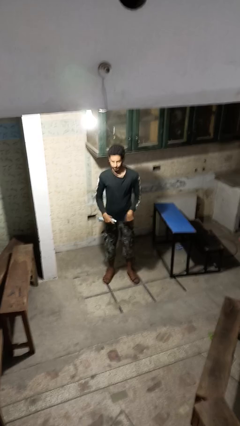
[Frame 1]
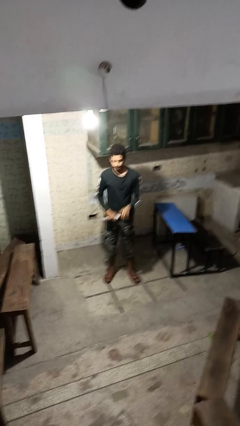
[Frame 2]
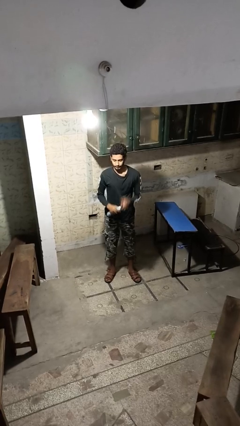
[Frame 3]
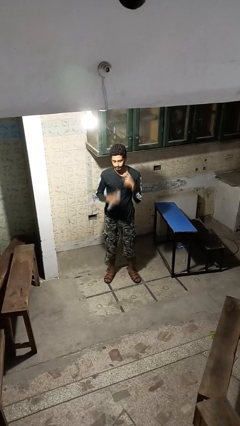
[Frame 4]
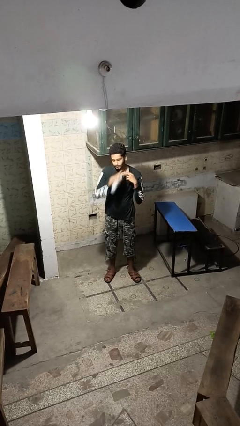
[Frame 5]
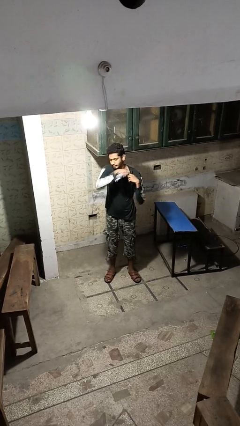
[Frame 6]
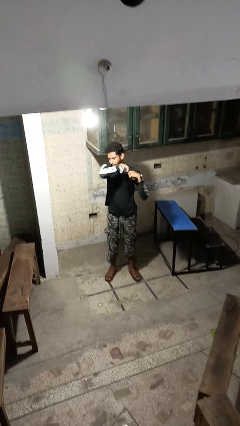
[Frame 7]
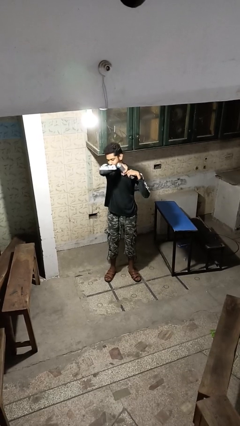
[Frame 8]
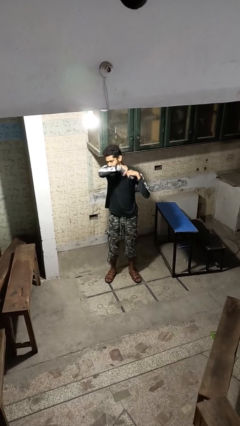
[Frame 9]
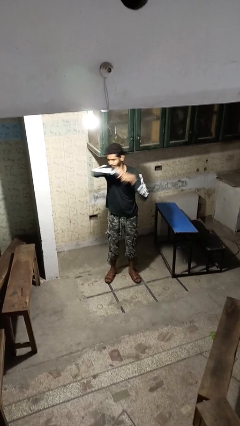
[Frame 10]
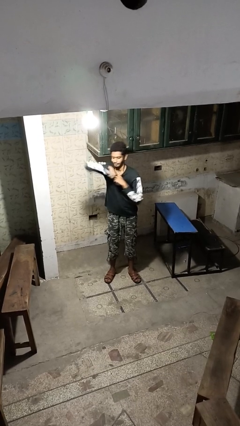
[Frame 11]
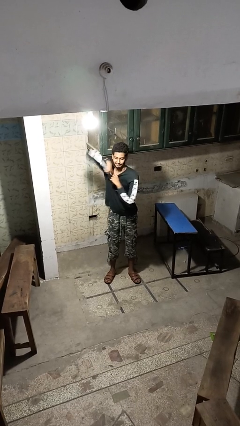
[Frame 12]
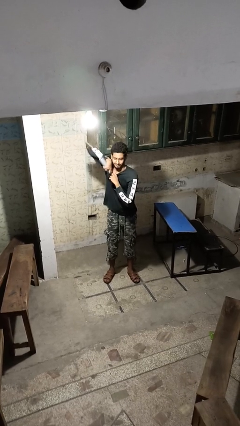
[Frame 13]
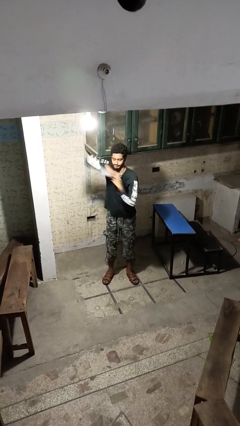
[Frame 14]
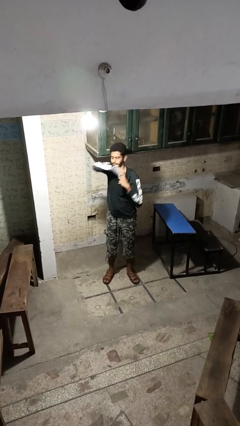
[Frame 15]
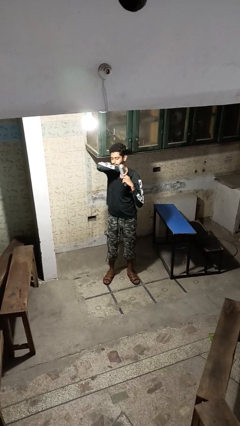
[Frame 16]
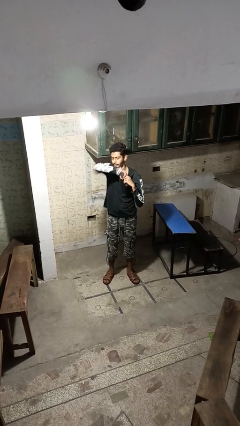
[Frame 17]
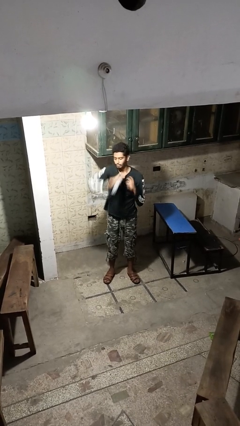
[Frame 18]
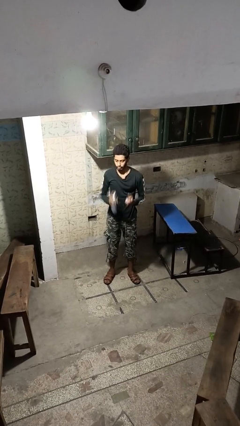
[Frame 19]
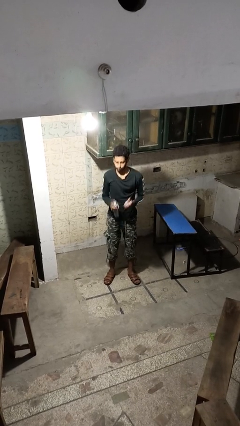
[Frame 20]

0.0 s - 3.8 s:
person applies deodorant

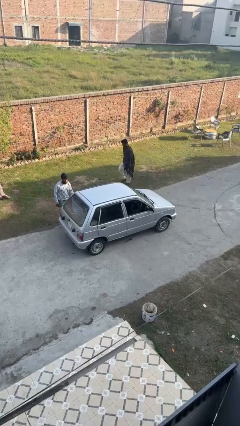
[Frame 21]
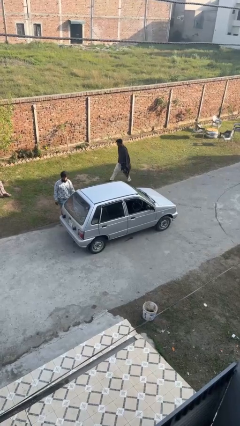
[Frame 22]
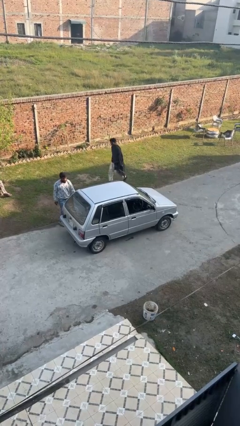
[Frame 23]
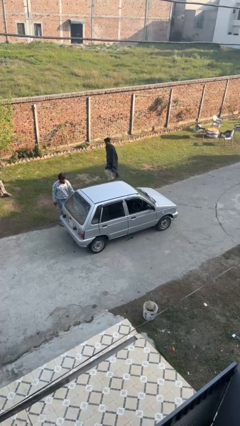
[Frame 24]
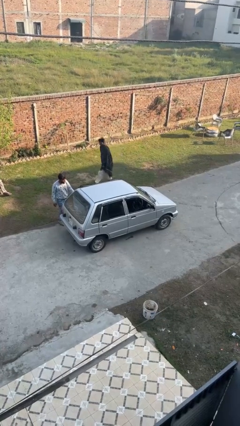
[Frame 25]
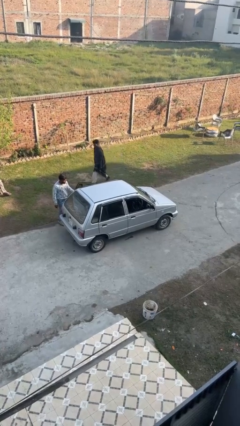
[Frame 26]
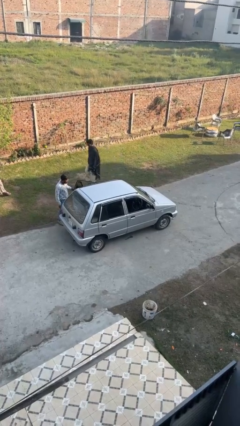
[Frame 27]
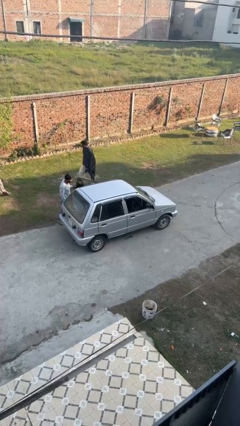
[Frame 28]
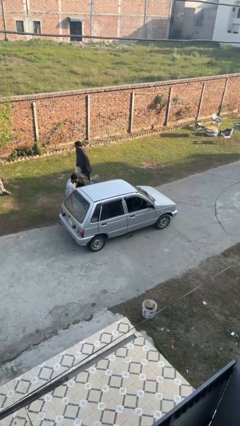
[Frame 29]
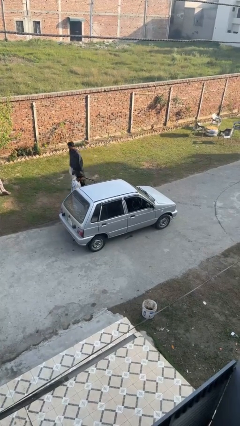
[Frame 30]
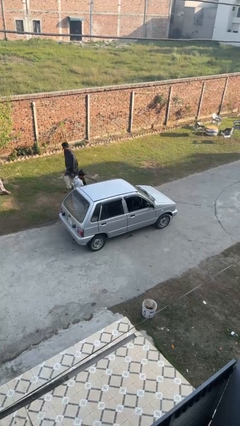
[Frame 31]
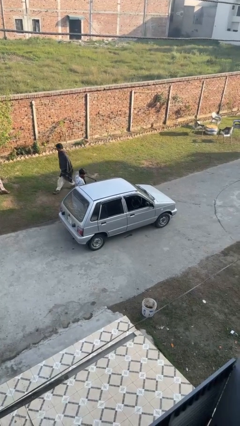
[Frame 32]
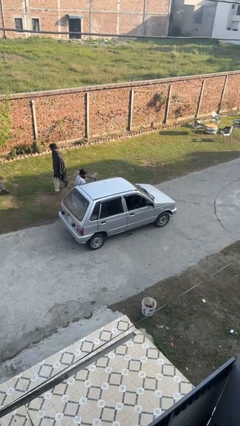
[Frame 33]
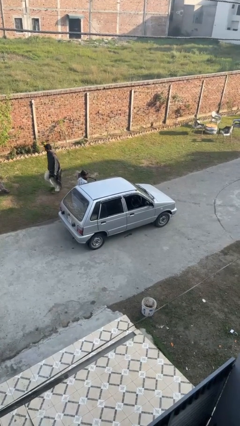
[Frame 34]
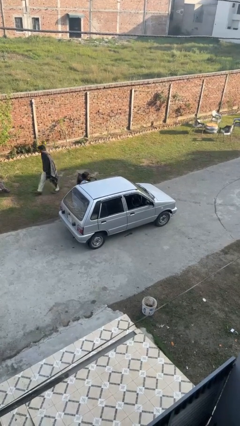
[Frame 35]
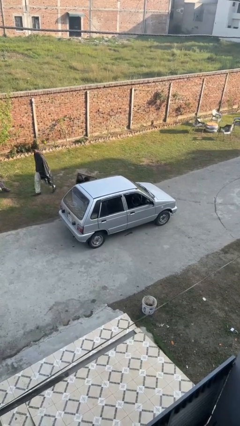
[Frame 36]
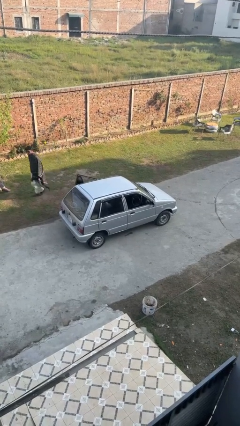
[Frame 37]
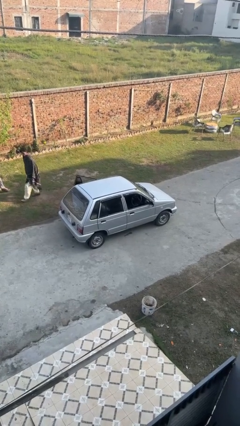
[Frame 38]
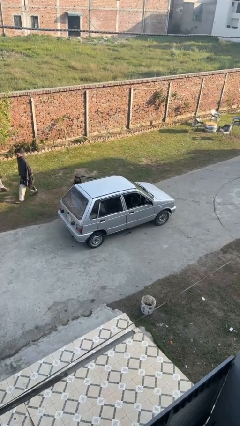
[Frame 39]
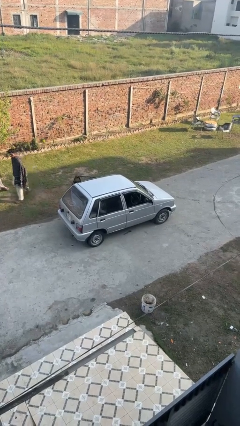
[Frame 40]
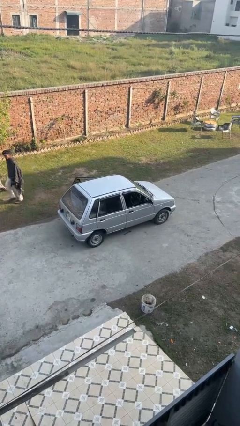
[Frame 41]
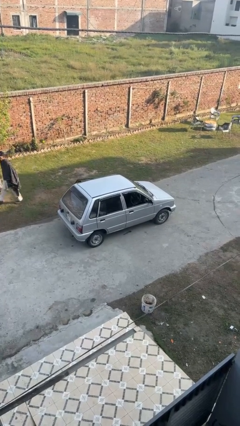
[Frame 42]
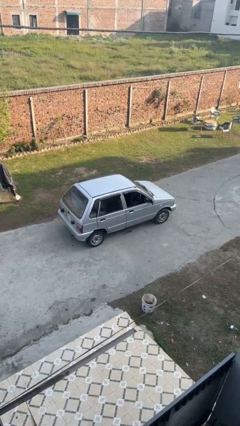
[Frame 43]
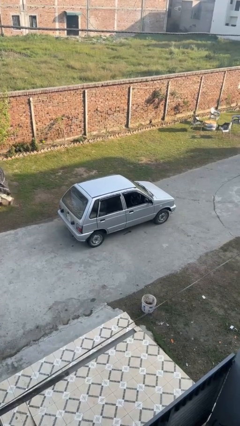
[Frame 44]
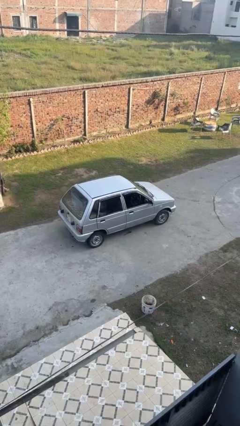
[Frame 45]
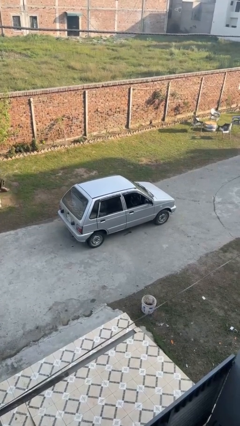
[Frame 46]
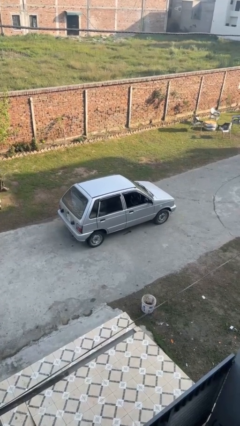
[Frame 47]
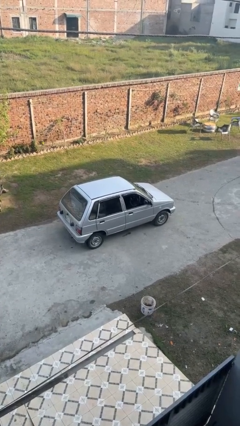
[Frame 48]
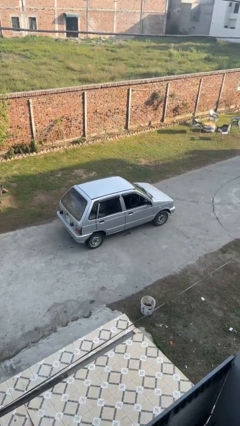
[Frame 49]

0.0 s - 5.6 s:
car picks up person

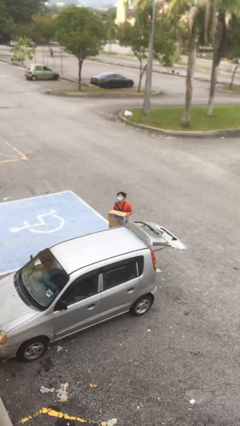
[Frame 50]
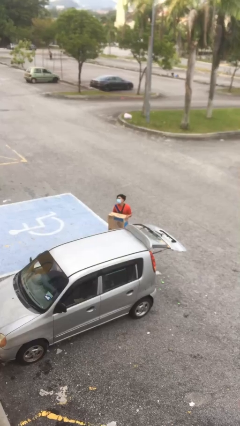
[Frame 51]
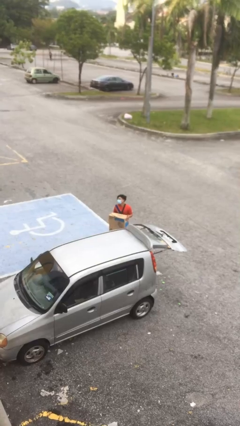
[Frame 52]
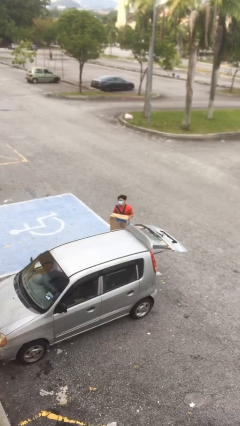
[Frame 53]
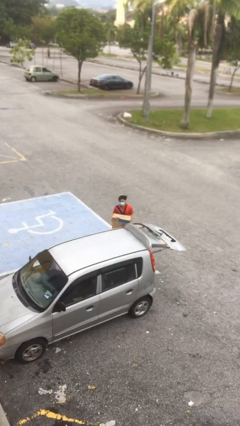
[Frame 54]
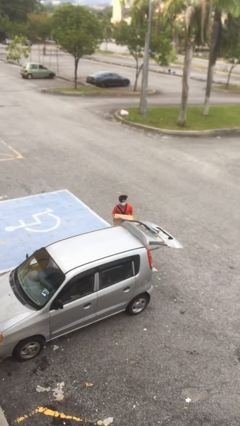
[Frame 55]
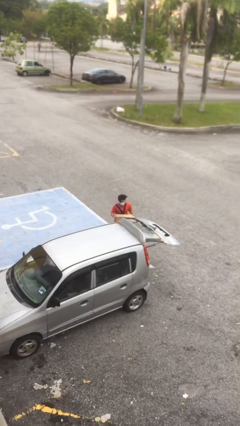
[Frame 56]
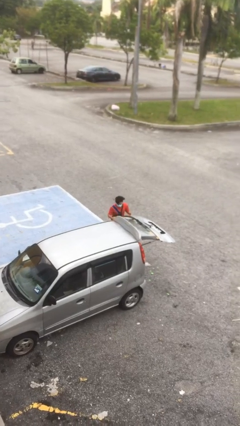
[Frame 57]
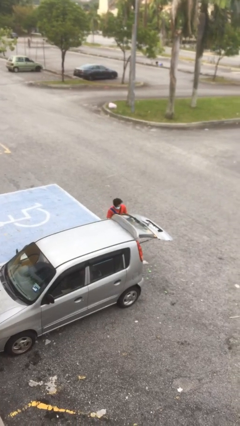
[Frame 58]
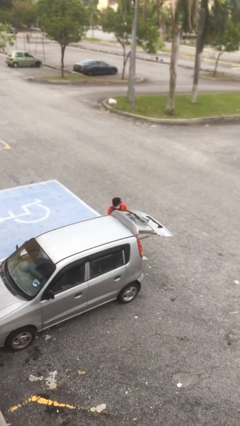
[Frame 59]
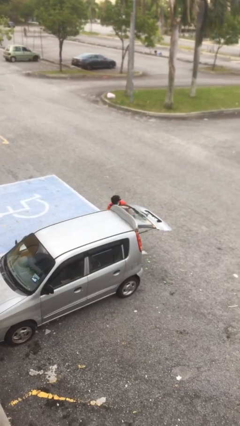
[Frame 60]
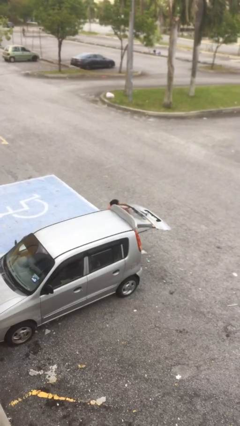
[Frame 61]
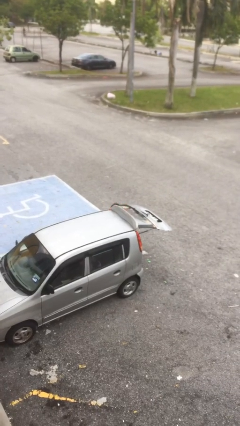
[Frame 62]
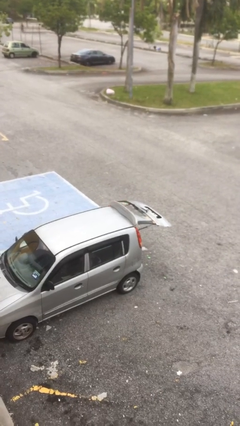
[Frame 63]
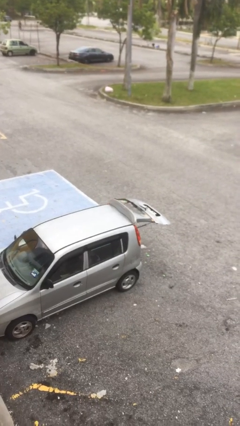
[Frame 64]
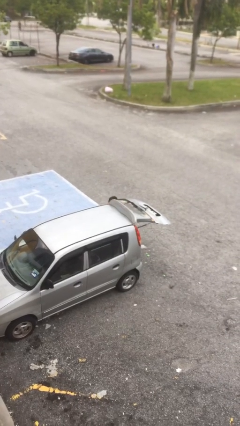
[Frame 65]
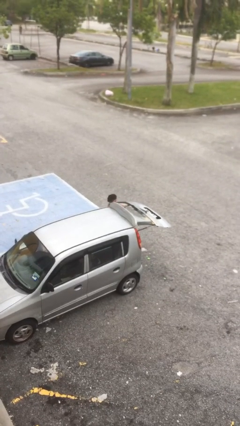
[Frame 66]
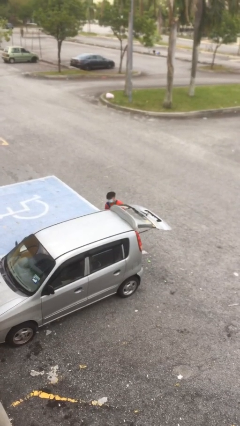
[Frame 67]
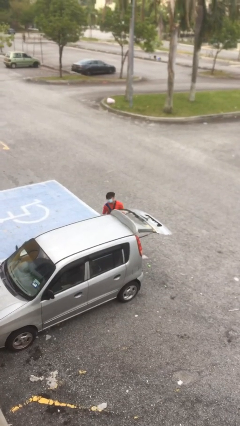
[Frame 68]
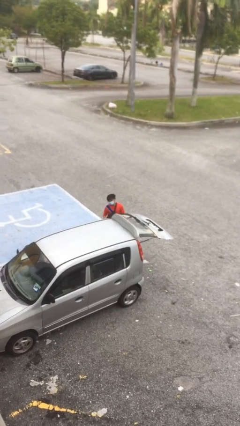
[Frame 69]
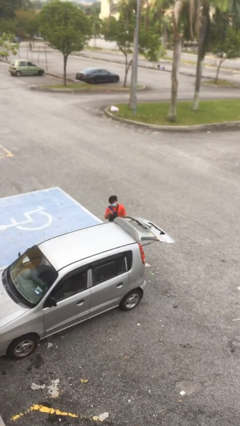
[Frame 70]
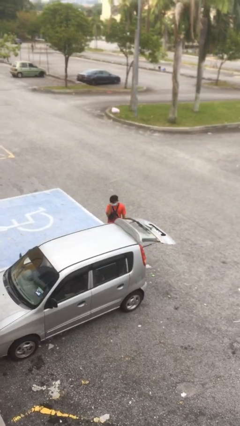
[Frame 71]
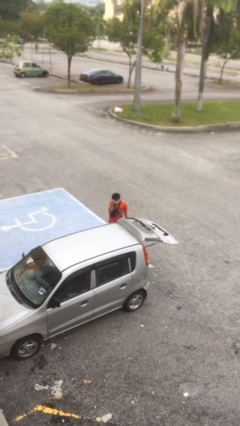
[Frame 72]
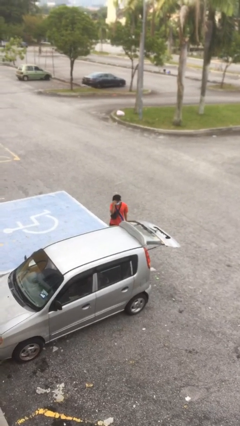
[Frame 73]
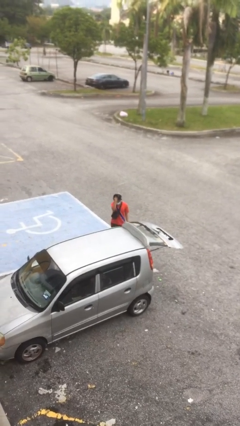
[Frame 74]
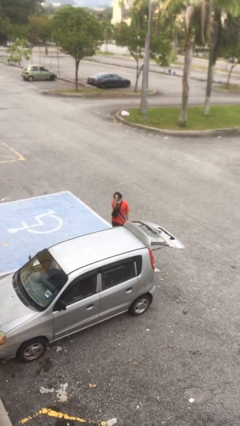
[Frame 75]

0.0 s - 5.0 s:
person loads car

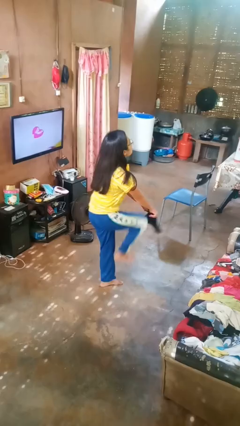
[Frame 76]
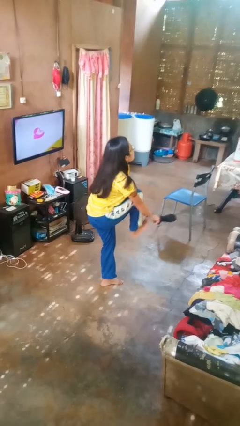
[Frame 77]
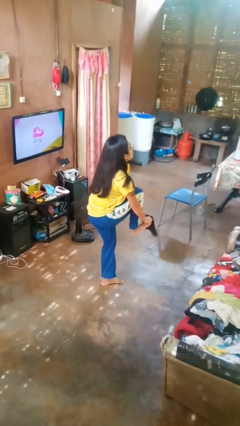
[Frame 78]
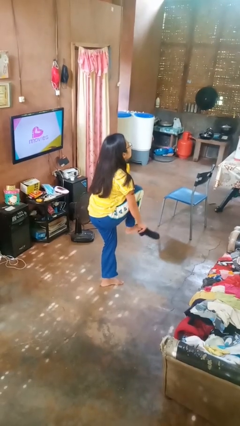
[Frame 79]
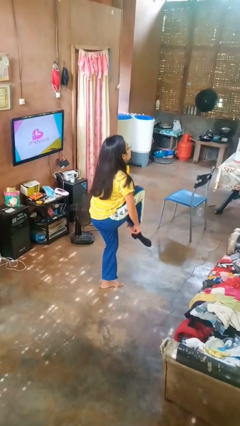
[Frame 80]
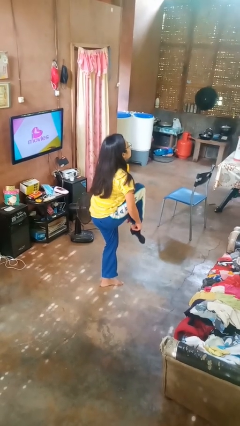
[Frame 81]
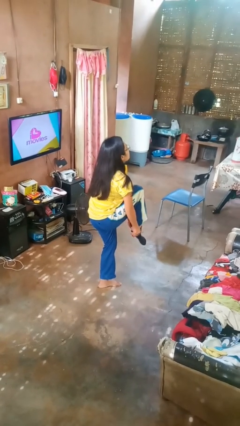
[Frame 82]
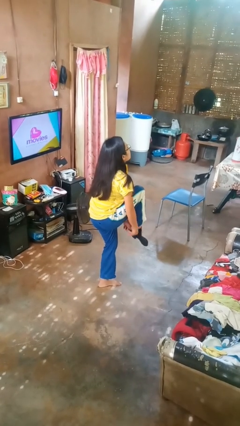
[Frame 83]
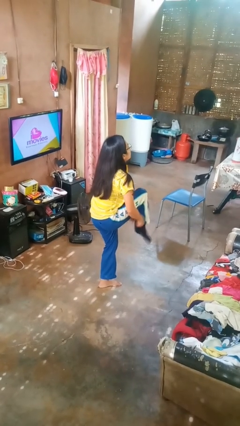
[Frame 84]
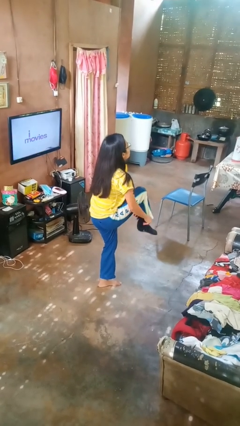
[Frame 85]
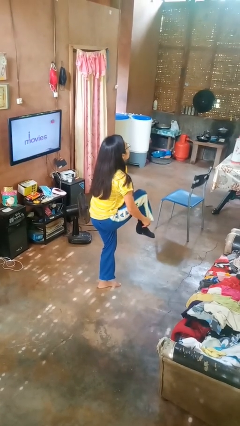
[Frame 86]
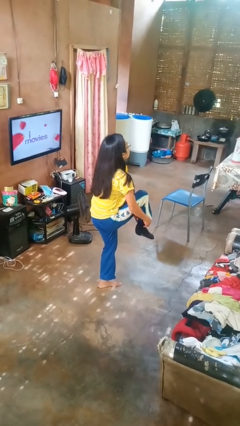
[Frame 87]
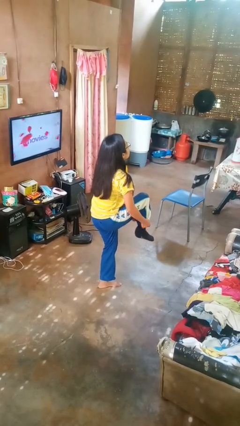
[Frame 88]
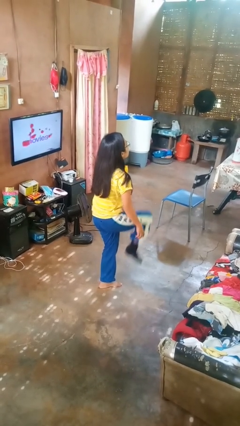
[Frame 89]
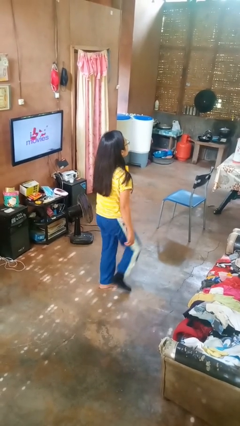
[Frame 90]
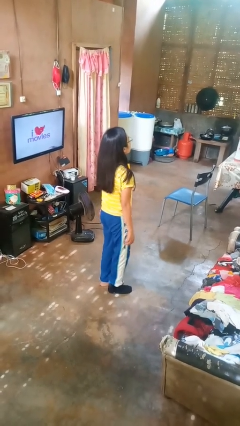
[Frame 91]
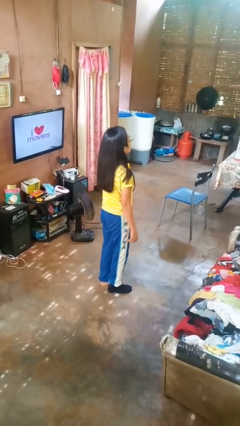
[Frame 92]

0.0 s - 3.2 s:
person puts on socks
